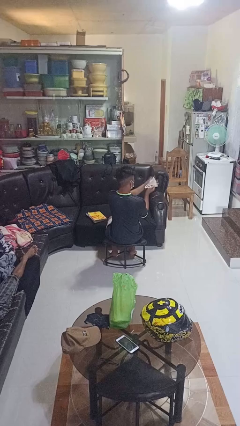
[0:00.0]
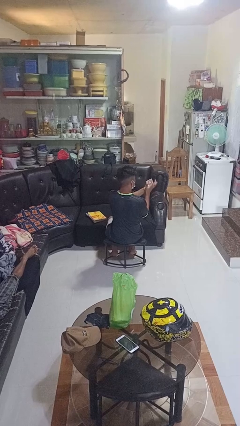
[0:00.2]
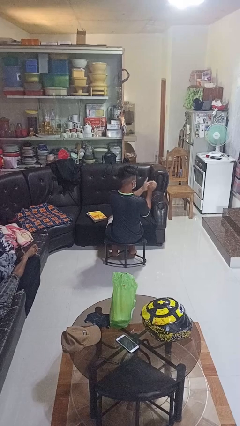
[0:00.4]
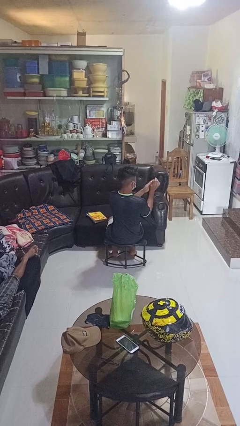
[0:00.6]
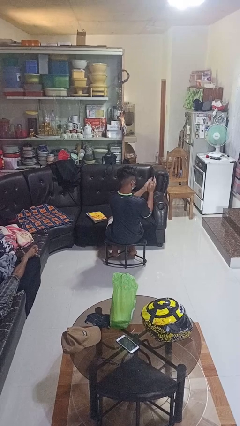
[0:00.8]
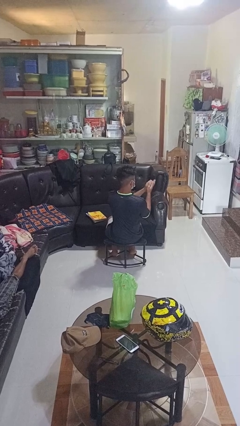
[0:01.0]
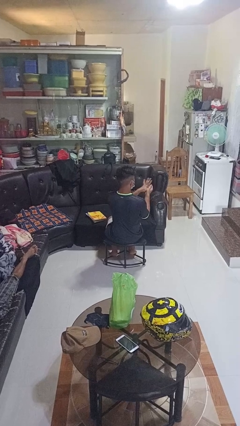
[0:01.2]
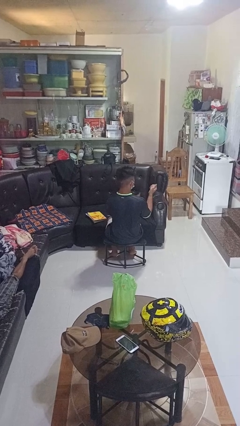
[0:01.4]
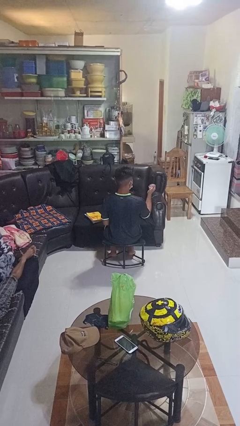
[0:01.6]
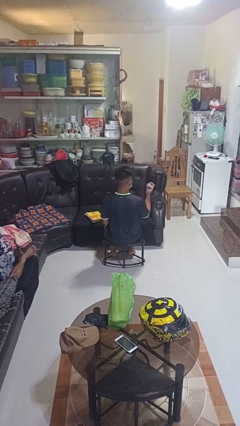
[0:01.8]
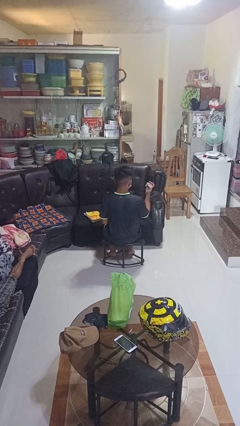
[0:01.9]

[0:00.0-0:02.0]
person crumples paper

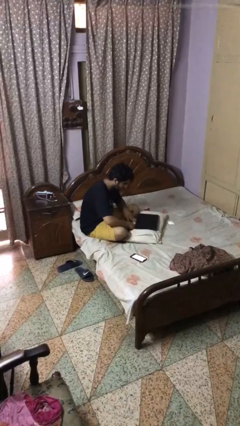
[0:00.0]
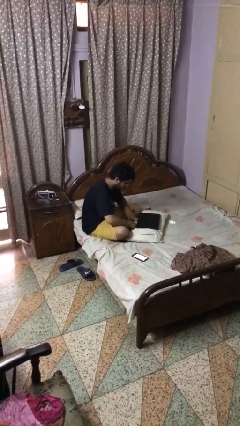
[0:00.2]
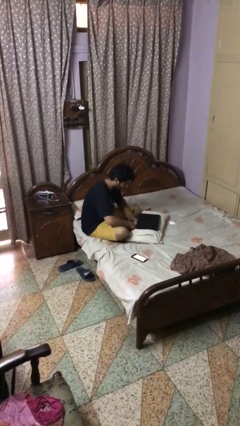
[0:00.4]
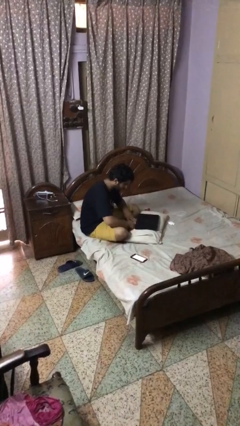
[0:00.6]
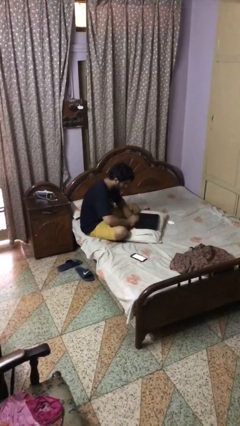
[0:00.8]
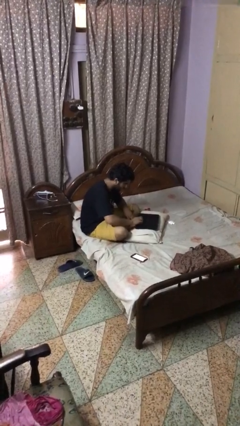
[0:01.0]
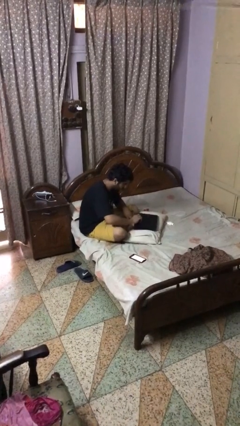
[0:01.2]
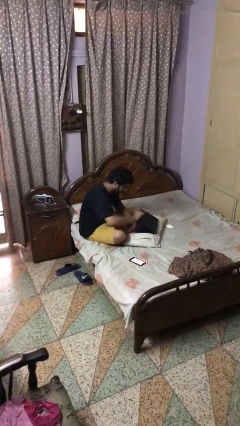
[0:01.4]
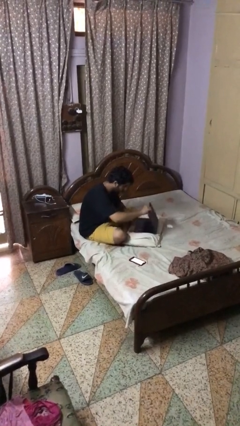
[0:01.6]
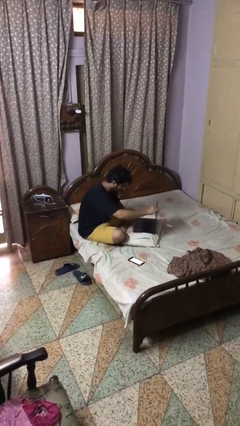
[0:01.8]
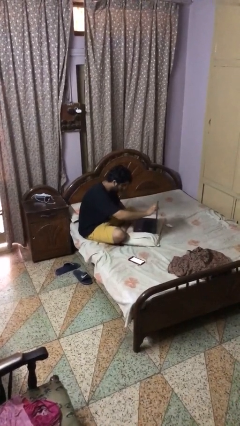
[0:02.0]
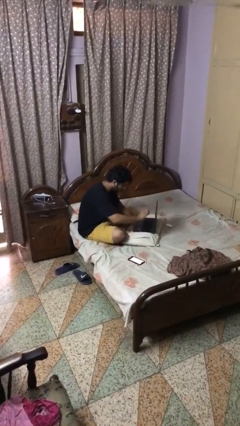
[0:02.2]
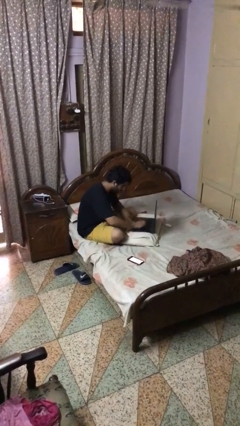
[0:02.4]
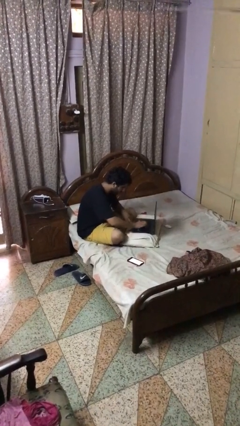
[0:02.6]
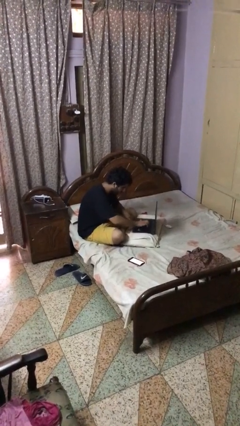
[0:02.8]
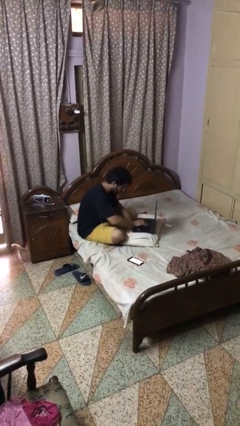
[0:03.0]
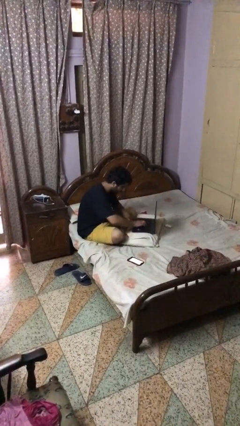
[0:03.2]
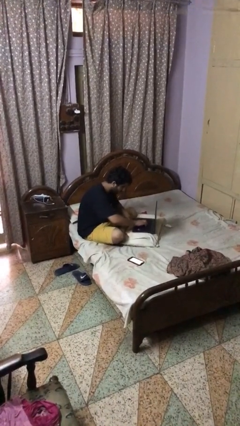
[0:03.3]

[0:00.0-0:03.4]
person opens laptop

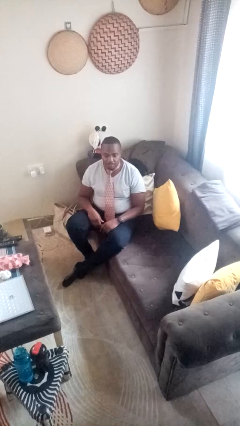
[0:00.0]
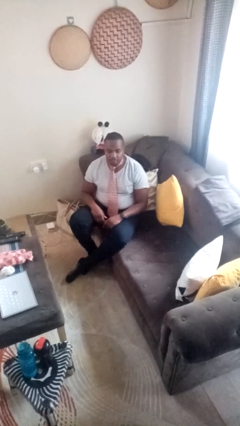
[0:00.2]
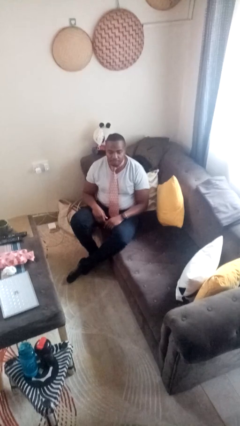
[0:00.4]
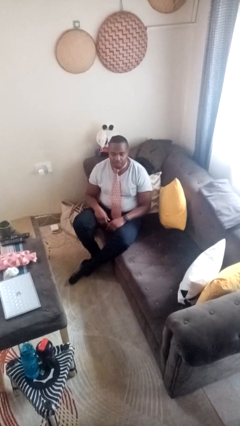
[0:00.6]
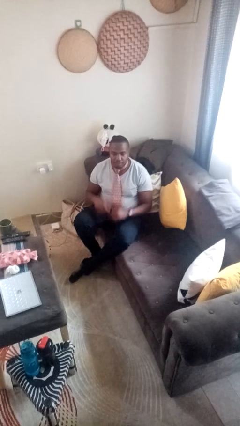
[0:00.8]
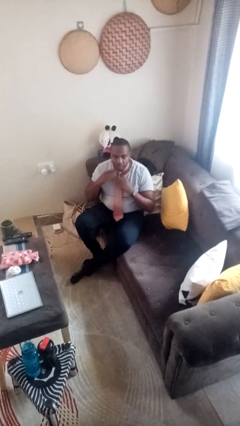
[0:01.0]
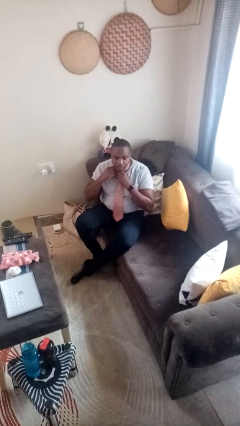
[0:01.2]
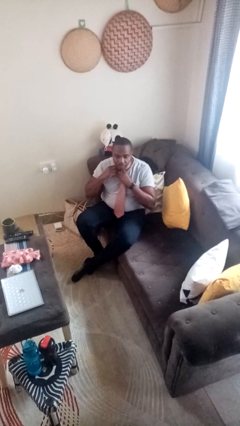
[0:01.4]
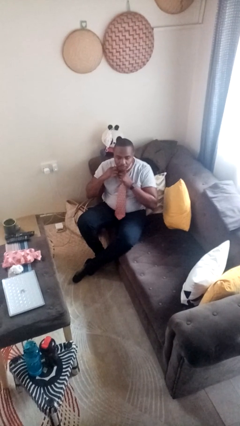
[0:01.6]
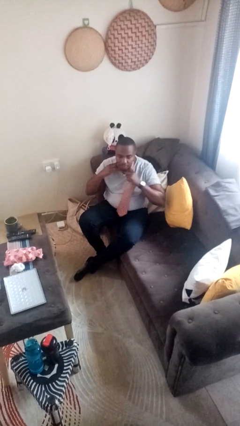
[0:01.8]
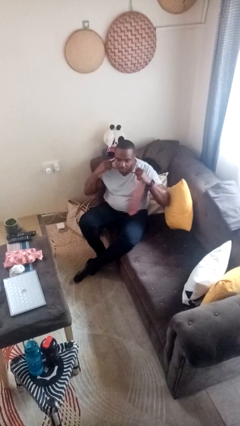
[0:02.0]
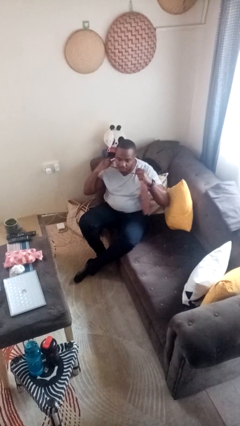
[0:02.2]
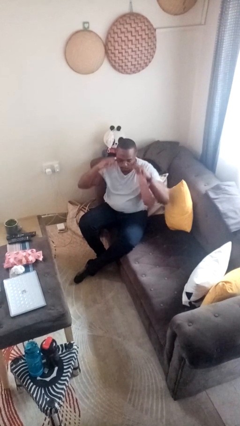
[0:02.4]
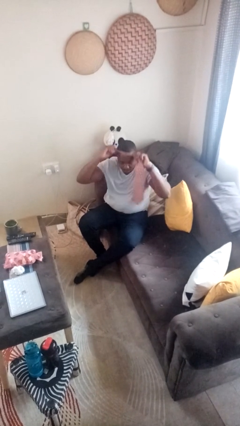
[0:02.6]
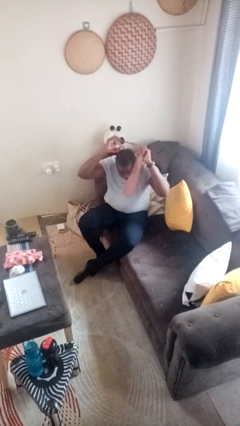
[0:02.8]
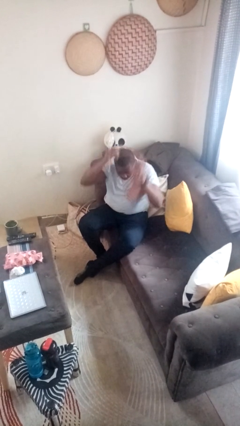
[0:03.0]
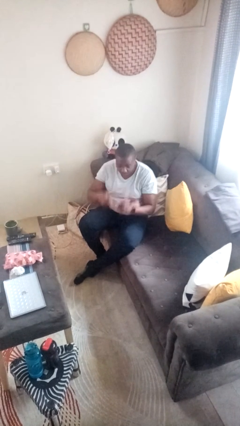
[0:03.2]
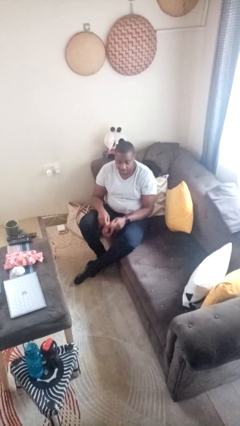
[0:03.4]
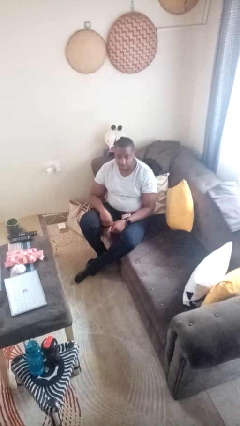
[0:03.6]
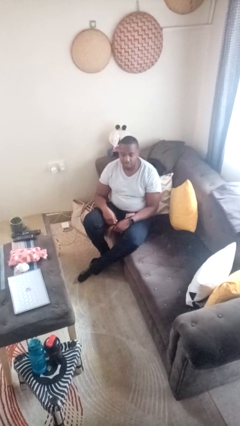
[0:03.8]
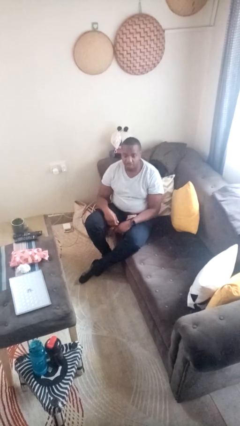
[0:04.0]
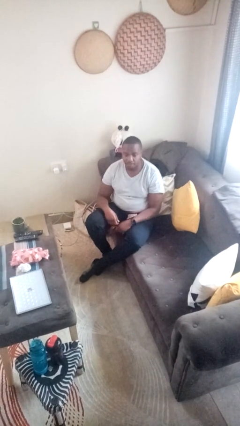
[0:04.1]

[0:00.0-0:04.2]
person takes off necktie

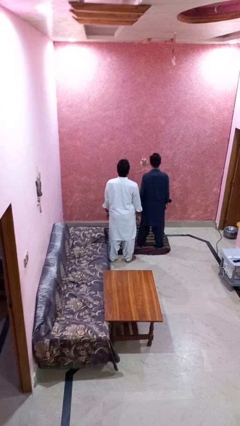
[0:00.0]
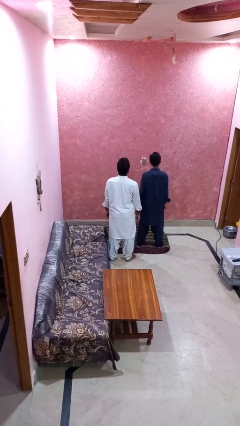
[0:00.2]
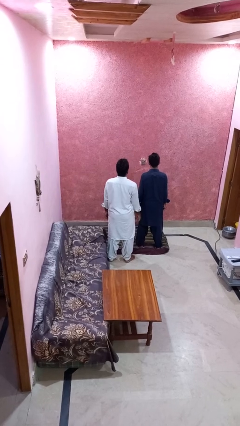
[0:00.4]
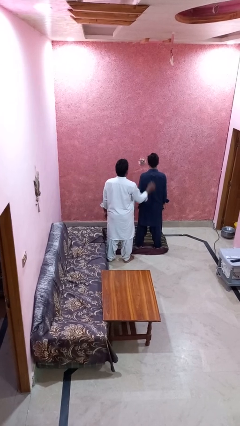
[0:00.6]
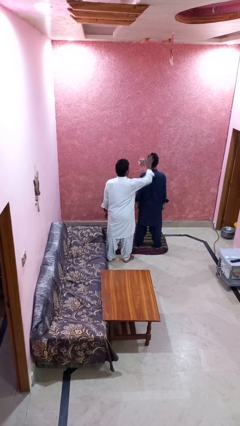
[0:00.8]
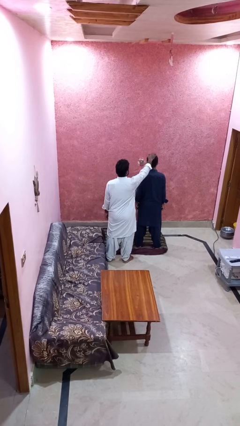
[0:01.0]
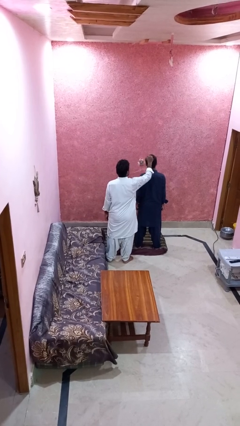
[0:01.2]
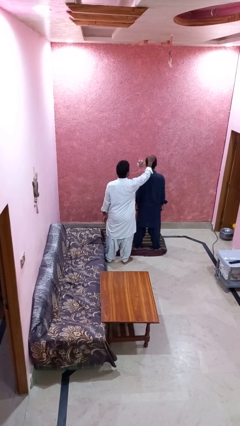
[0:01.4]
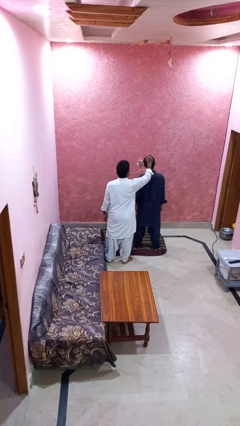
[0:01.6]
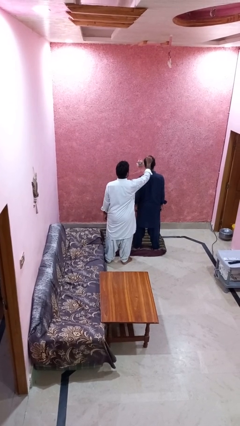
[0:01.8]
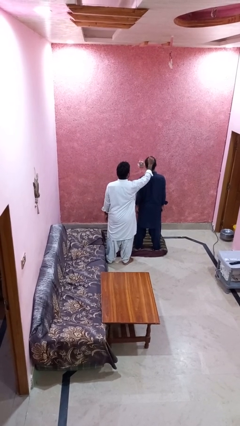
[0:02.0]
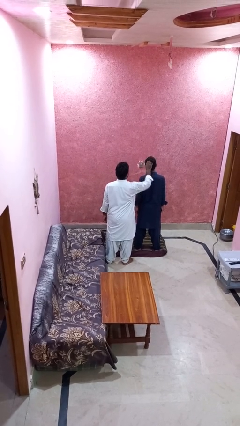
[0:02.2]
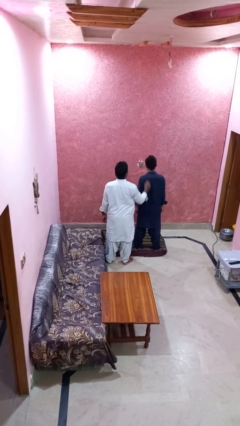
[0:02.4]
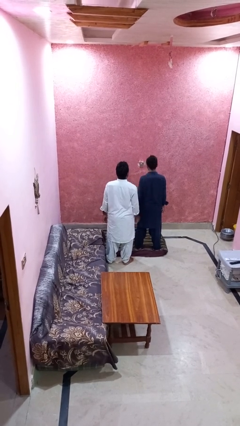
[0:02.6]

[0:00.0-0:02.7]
person grabs person by hair

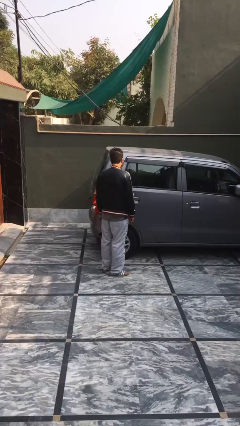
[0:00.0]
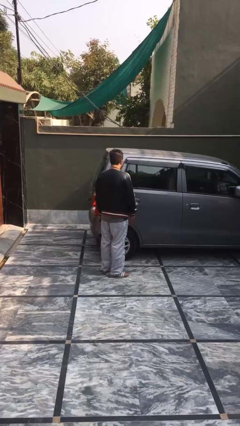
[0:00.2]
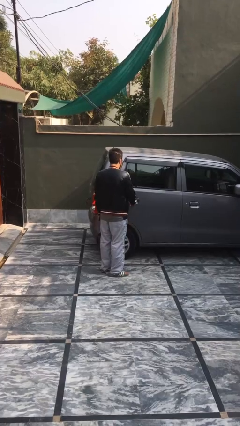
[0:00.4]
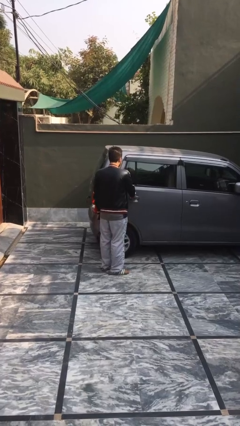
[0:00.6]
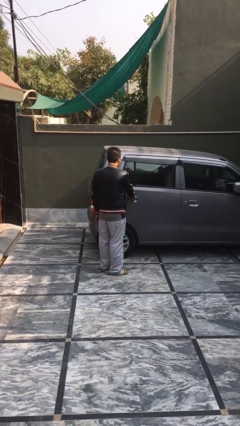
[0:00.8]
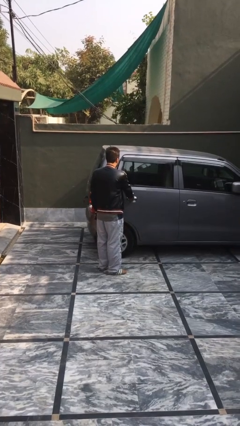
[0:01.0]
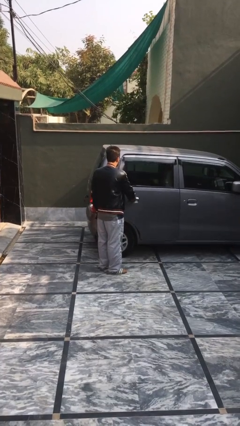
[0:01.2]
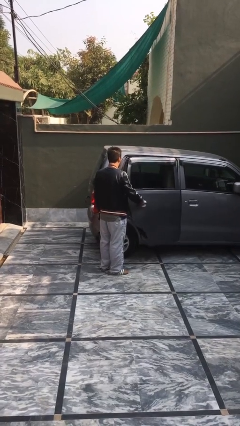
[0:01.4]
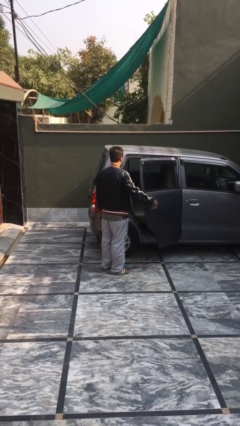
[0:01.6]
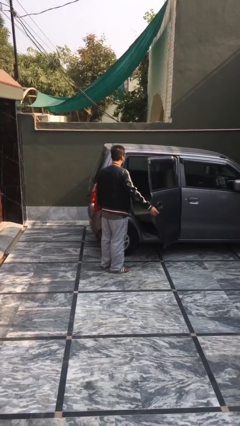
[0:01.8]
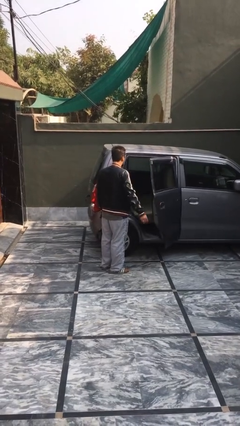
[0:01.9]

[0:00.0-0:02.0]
person opens car door

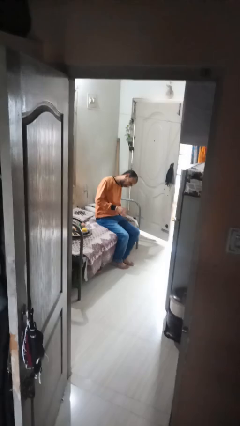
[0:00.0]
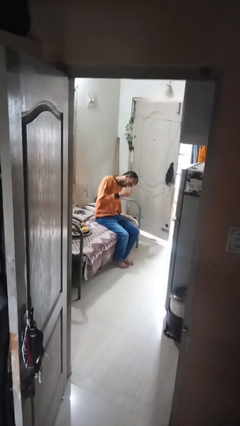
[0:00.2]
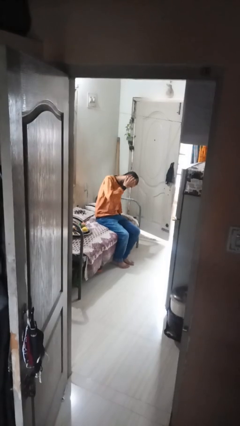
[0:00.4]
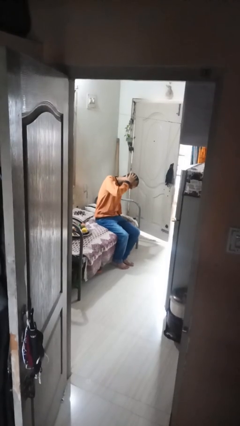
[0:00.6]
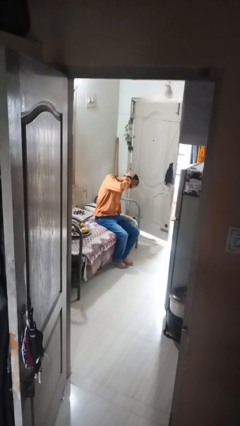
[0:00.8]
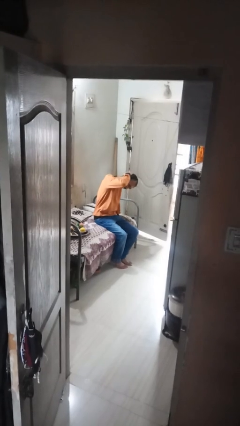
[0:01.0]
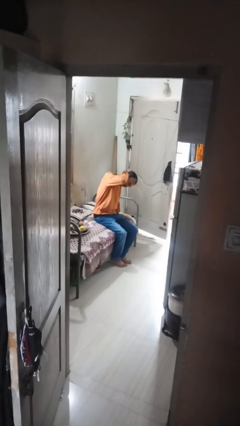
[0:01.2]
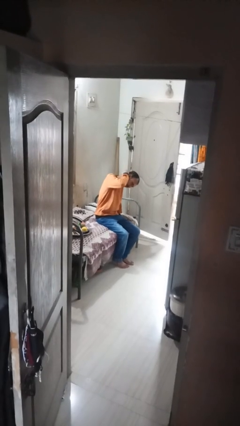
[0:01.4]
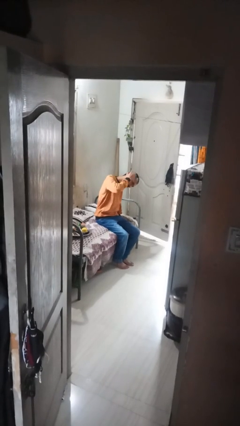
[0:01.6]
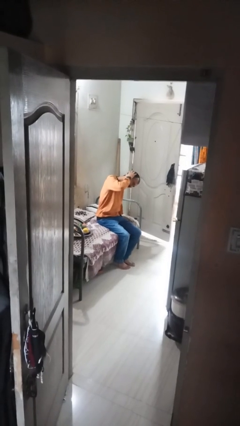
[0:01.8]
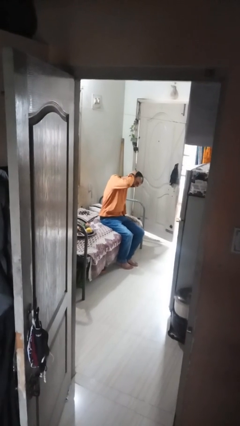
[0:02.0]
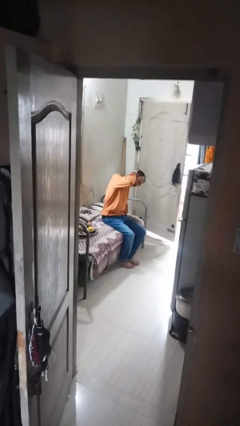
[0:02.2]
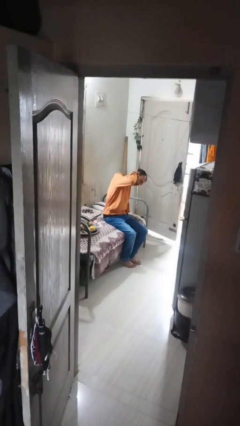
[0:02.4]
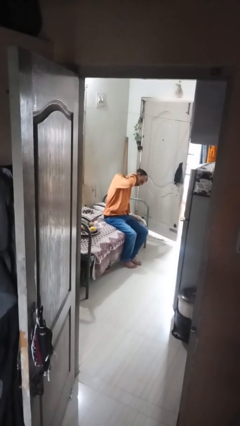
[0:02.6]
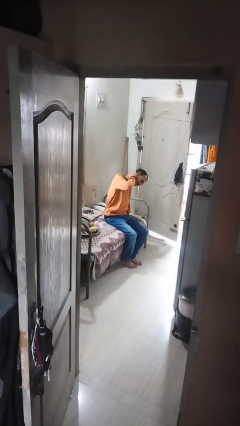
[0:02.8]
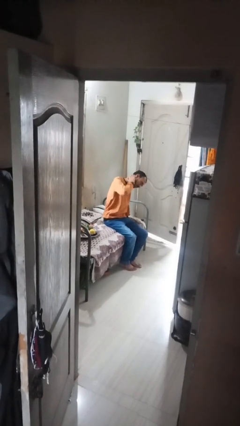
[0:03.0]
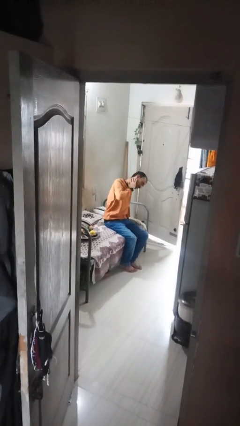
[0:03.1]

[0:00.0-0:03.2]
person strokes hair
